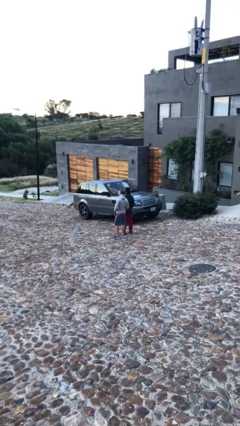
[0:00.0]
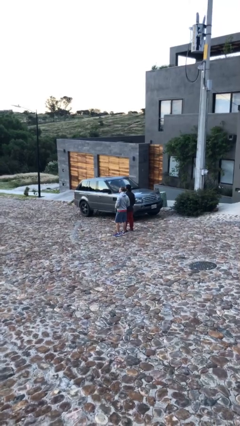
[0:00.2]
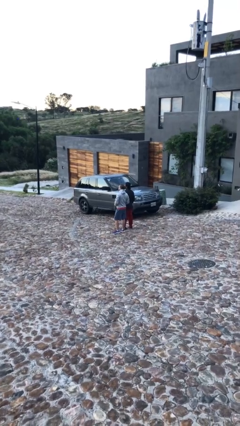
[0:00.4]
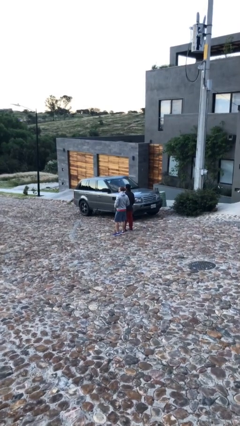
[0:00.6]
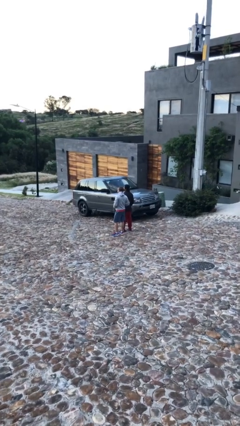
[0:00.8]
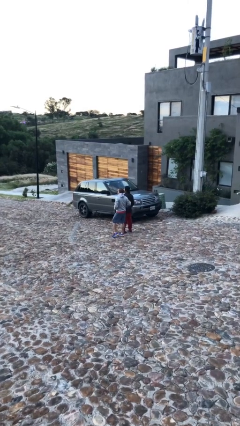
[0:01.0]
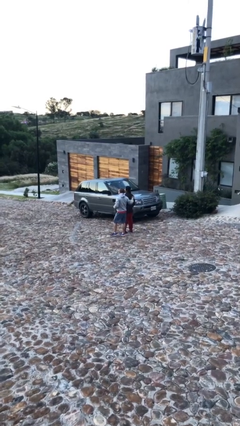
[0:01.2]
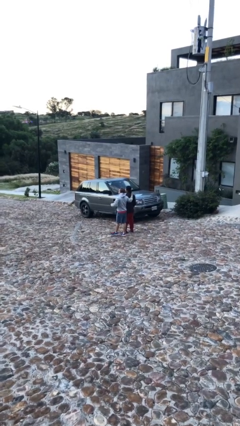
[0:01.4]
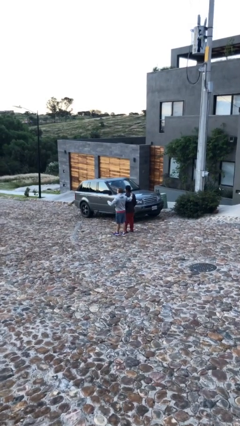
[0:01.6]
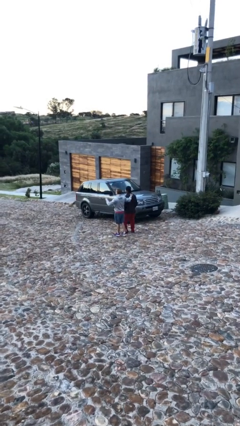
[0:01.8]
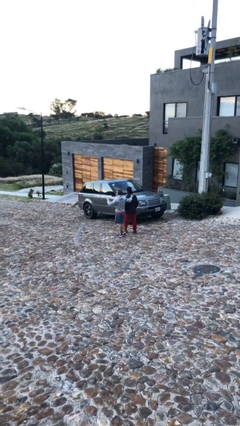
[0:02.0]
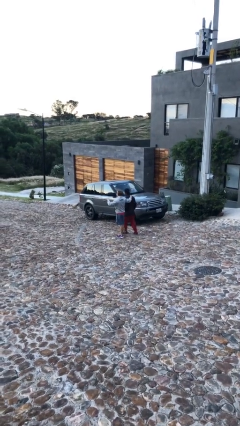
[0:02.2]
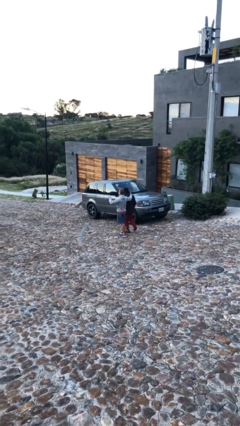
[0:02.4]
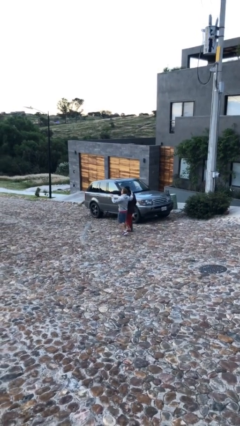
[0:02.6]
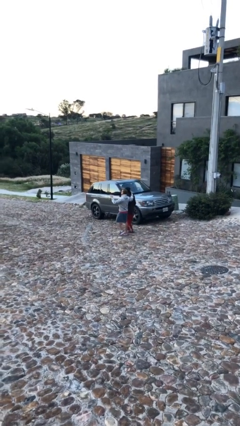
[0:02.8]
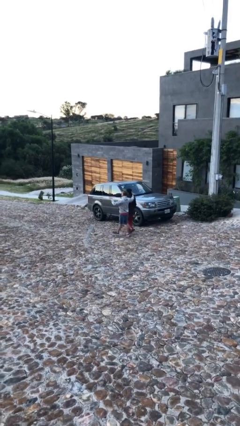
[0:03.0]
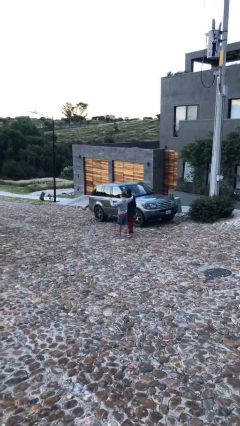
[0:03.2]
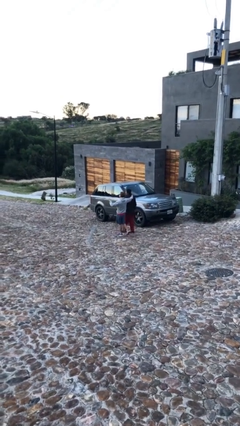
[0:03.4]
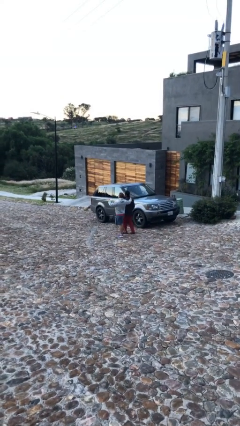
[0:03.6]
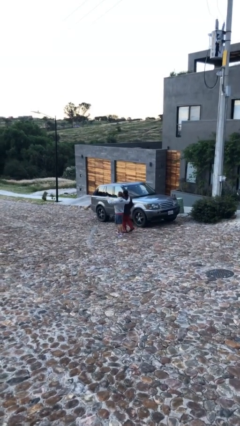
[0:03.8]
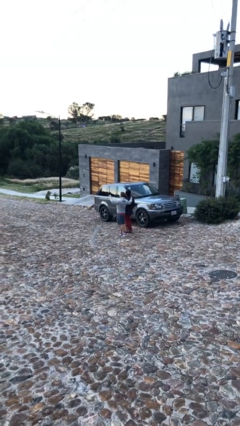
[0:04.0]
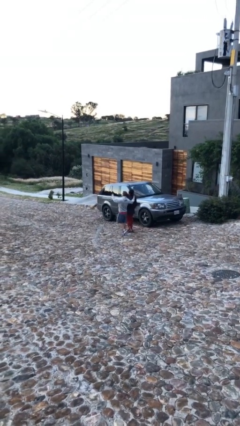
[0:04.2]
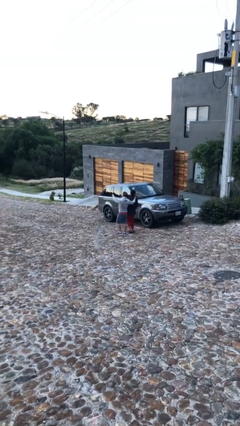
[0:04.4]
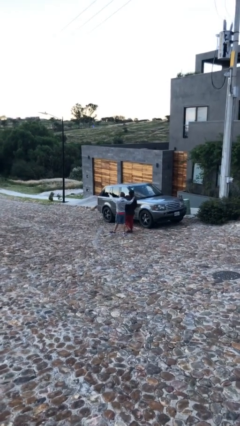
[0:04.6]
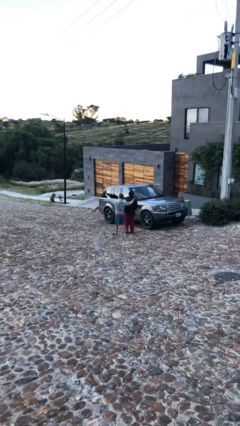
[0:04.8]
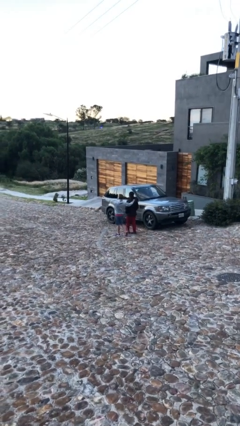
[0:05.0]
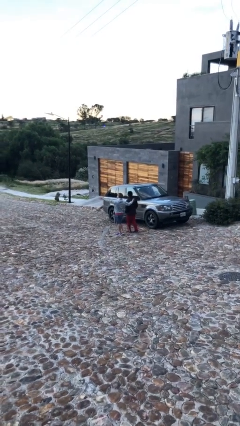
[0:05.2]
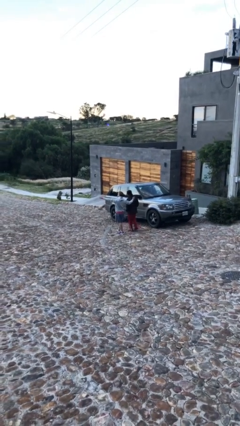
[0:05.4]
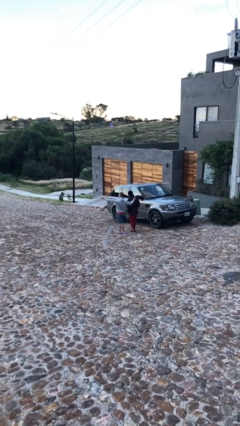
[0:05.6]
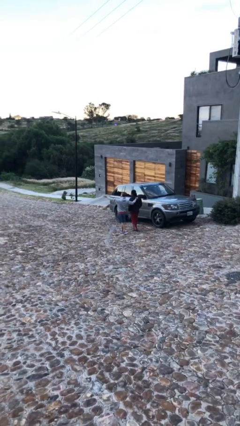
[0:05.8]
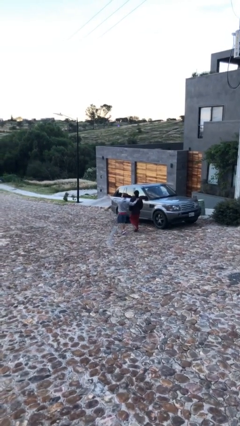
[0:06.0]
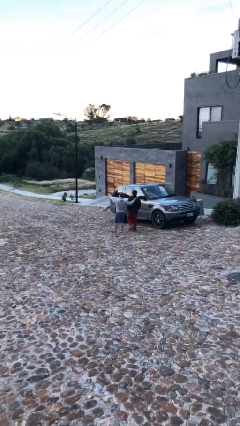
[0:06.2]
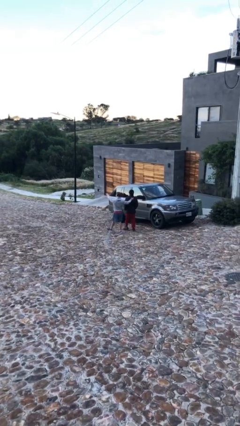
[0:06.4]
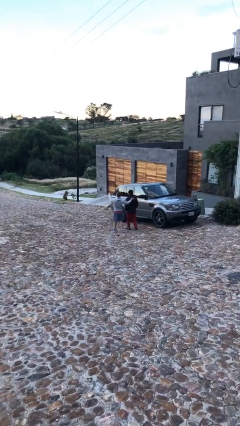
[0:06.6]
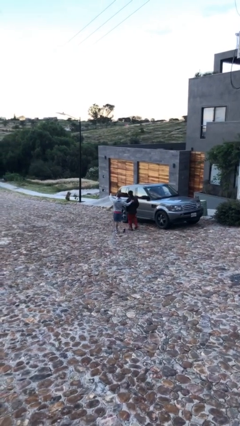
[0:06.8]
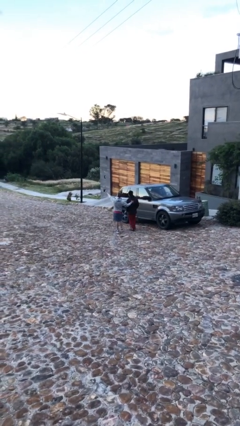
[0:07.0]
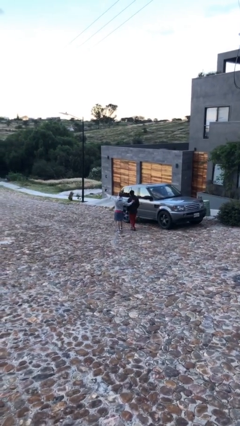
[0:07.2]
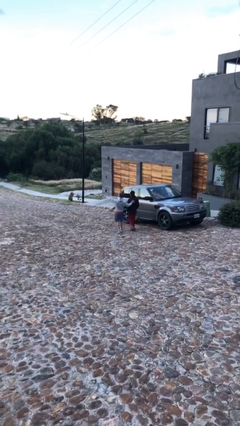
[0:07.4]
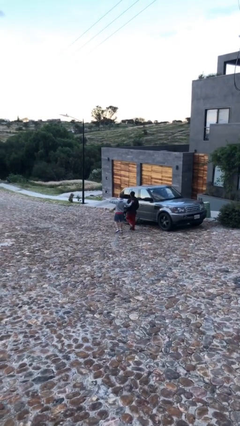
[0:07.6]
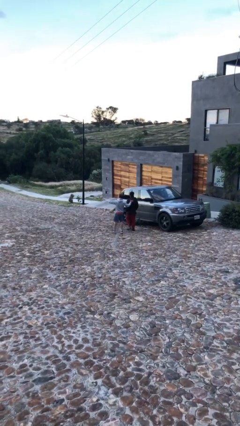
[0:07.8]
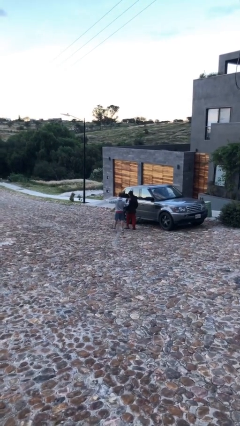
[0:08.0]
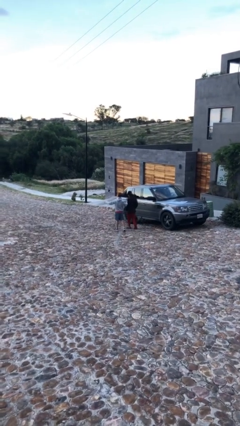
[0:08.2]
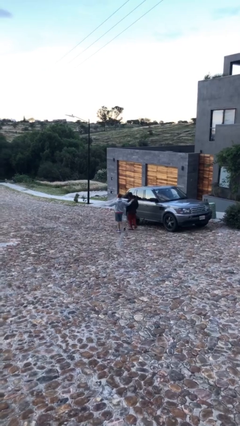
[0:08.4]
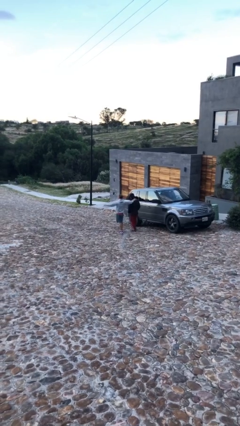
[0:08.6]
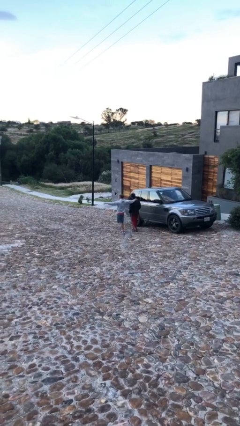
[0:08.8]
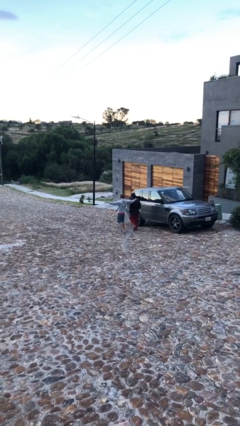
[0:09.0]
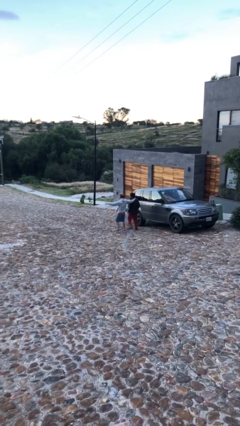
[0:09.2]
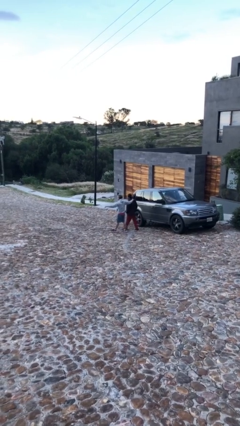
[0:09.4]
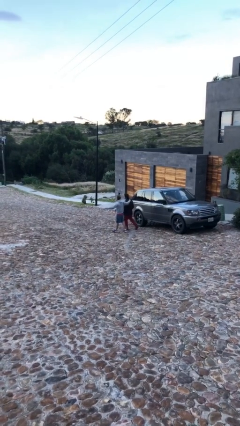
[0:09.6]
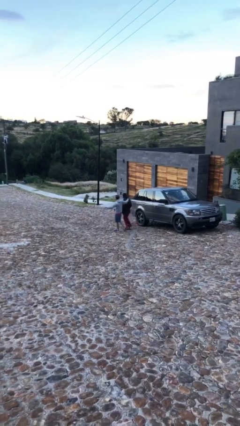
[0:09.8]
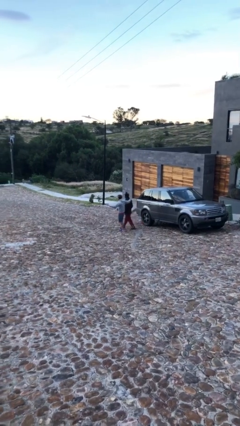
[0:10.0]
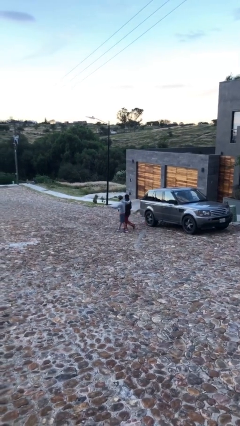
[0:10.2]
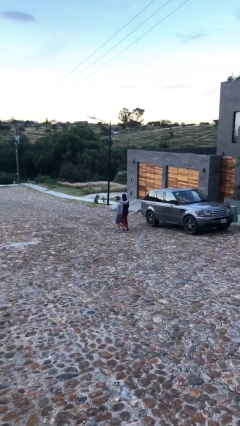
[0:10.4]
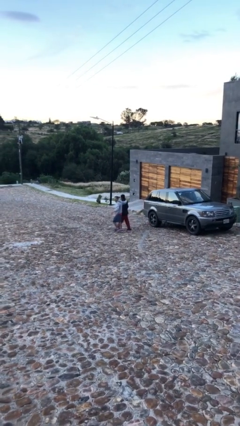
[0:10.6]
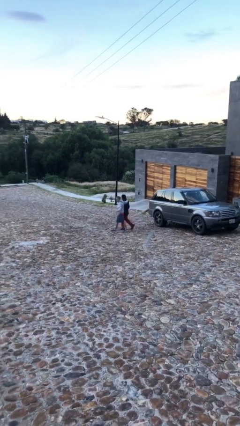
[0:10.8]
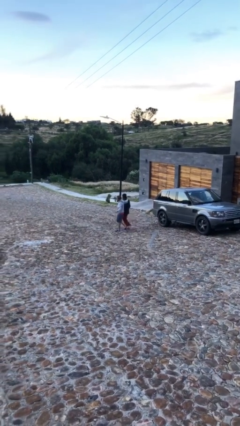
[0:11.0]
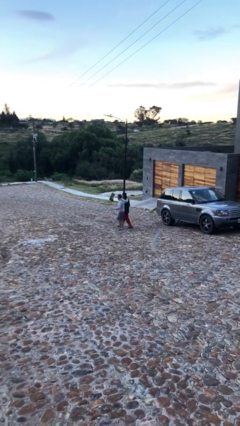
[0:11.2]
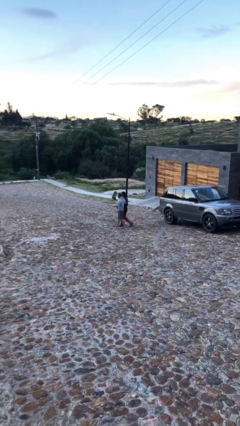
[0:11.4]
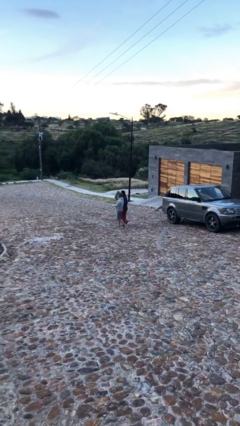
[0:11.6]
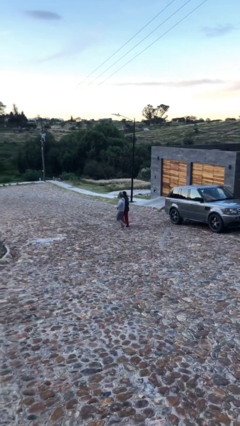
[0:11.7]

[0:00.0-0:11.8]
person talks to person

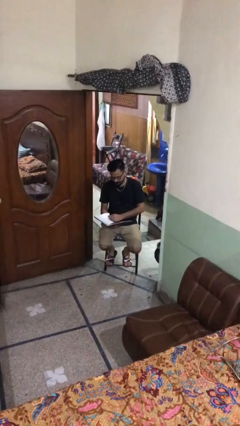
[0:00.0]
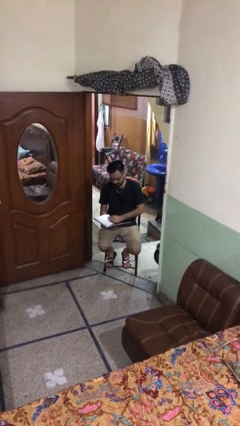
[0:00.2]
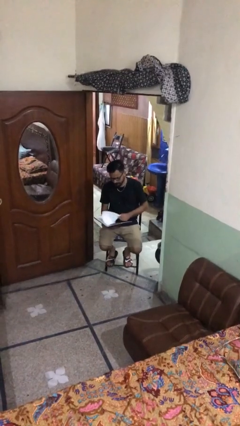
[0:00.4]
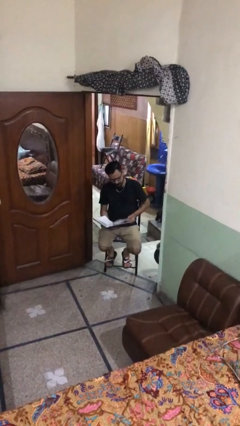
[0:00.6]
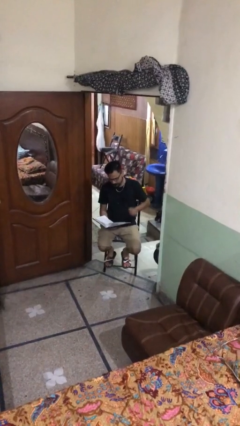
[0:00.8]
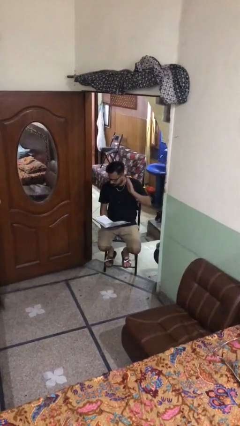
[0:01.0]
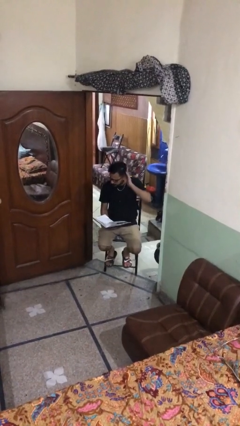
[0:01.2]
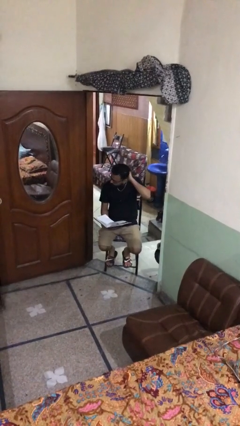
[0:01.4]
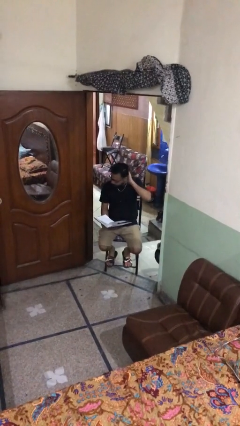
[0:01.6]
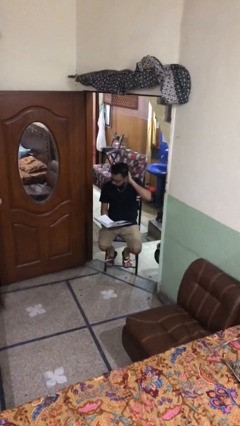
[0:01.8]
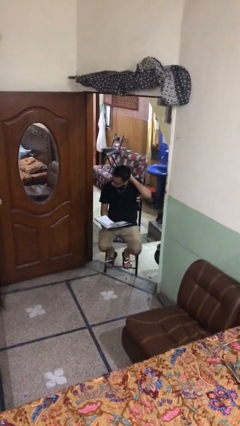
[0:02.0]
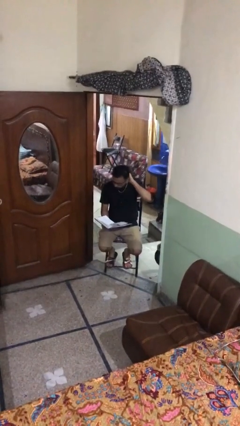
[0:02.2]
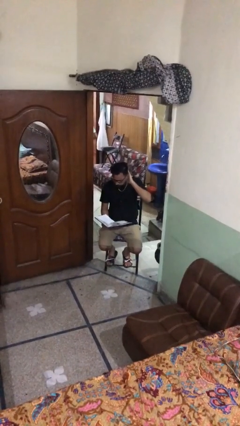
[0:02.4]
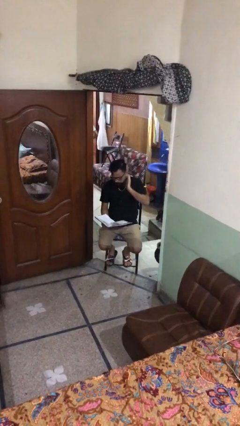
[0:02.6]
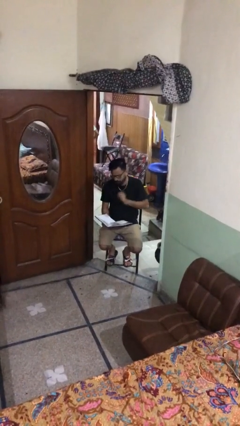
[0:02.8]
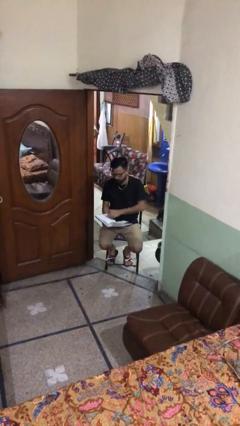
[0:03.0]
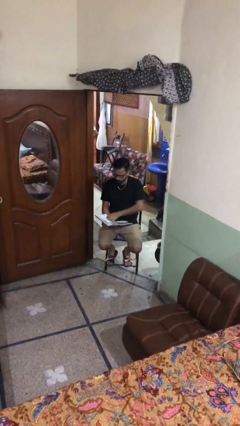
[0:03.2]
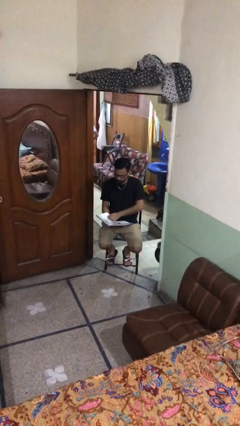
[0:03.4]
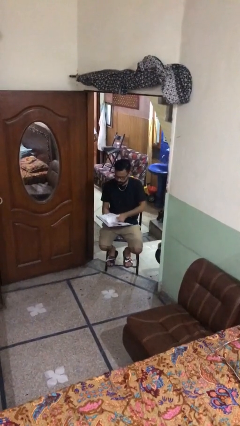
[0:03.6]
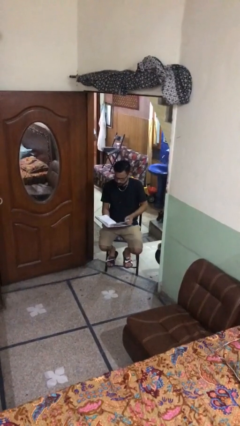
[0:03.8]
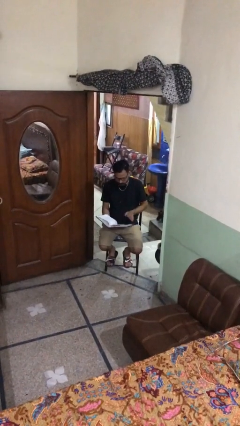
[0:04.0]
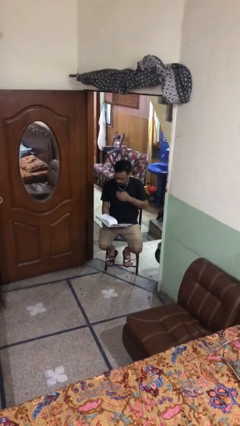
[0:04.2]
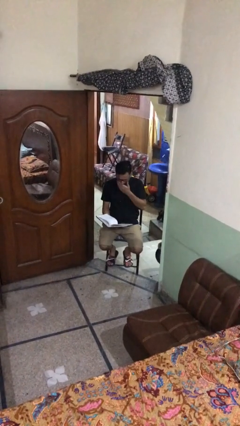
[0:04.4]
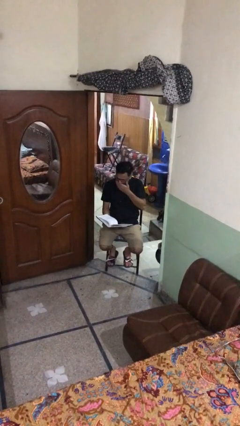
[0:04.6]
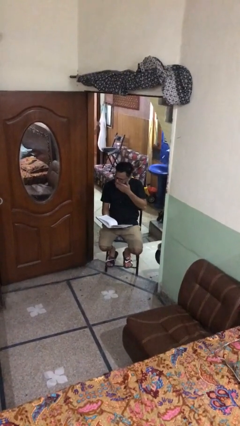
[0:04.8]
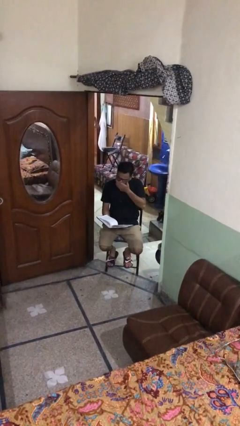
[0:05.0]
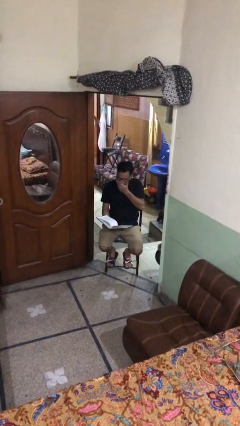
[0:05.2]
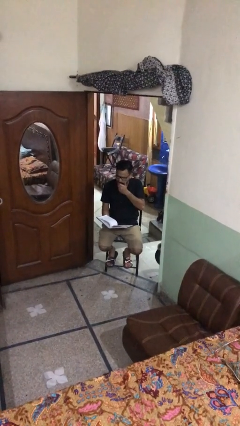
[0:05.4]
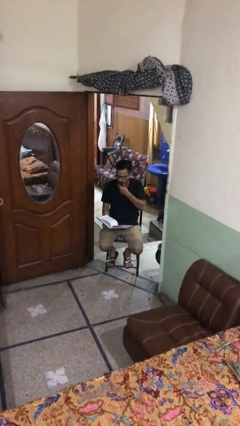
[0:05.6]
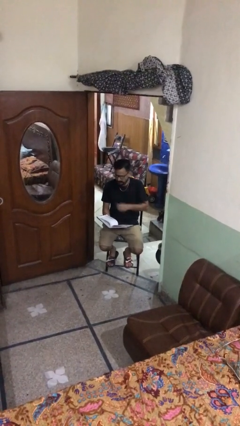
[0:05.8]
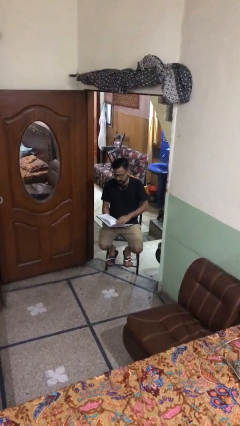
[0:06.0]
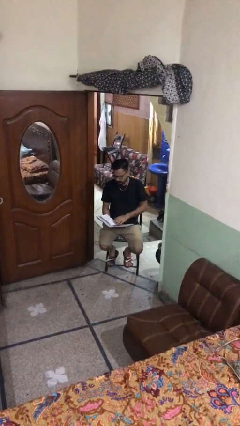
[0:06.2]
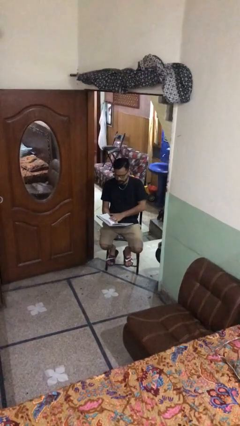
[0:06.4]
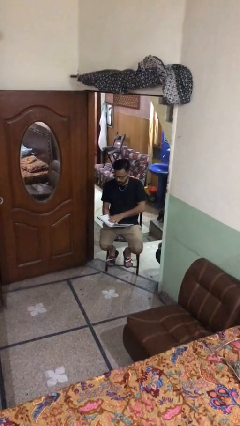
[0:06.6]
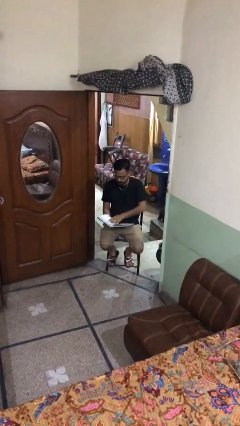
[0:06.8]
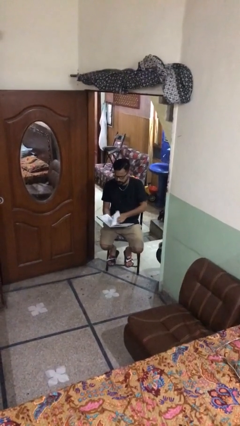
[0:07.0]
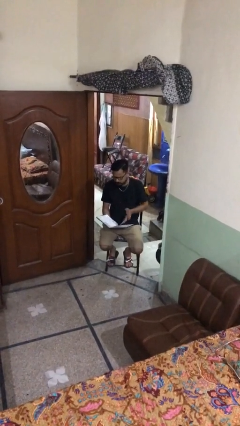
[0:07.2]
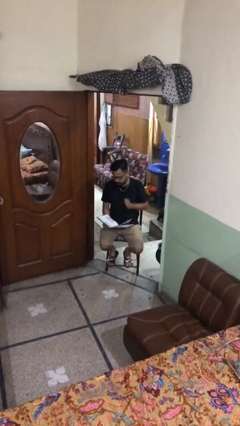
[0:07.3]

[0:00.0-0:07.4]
person reads document
